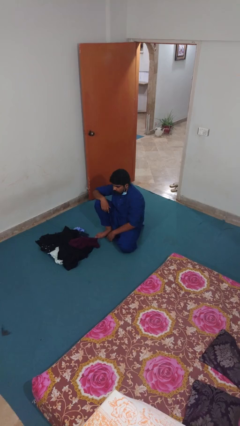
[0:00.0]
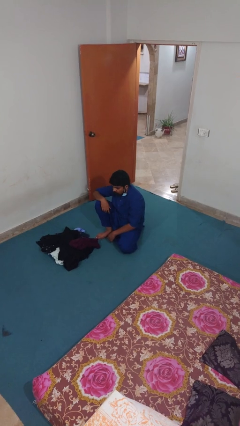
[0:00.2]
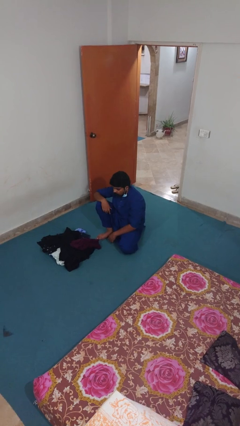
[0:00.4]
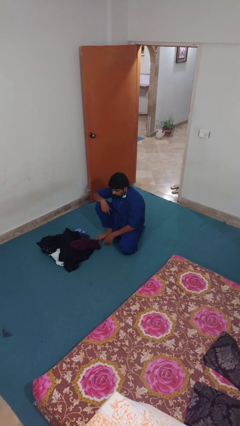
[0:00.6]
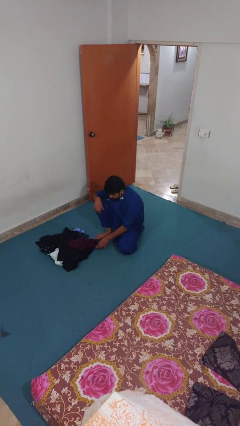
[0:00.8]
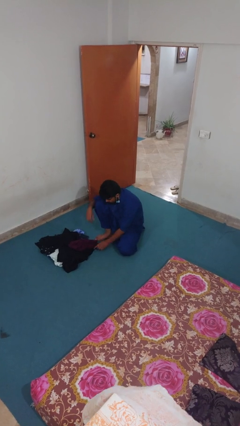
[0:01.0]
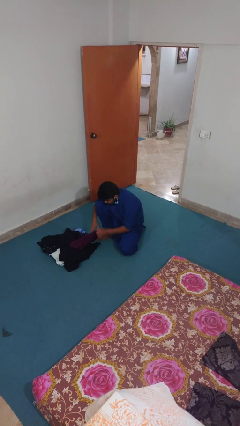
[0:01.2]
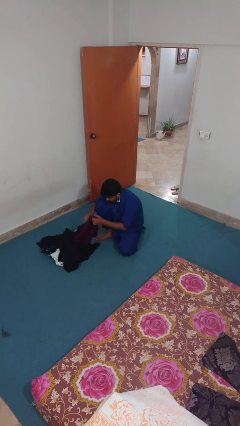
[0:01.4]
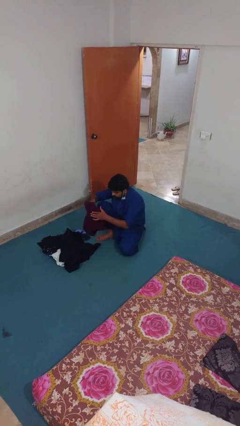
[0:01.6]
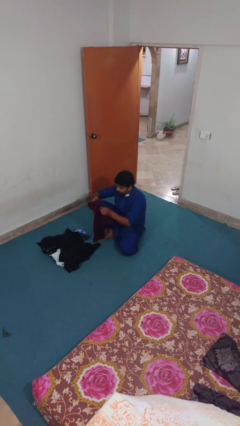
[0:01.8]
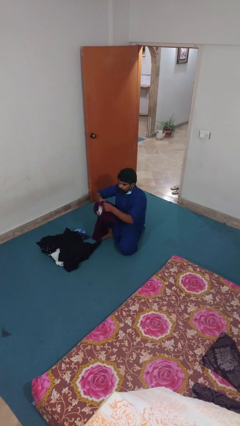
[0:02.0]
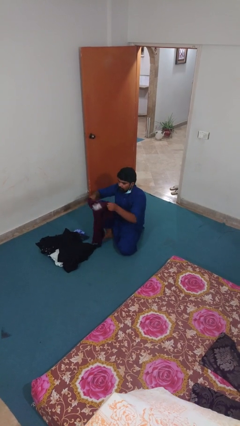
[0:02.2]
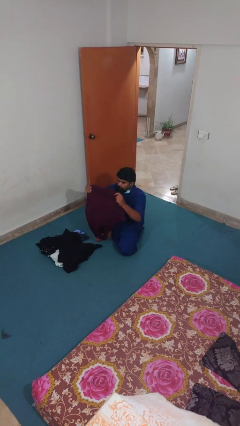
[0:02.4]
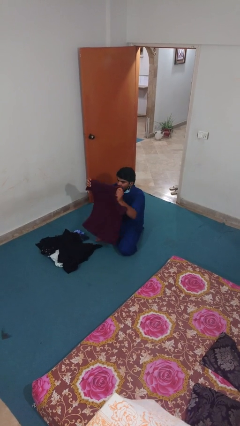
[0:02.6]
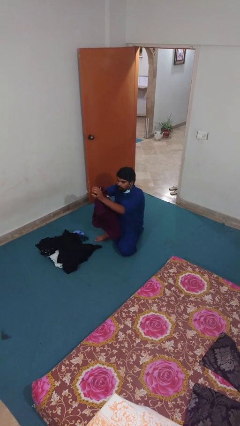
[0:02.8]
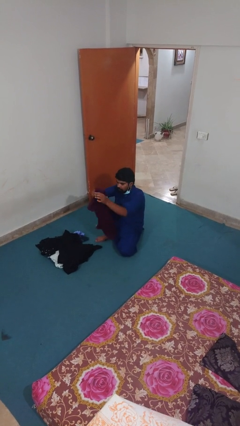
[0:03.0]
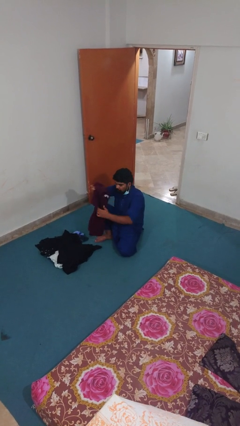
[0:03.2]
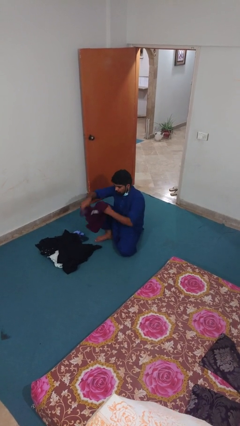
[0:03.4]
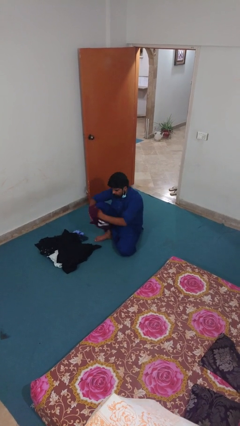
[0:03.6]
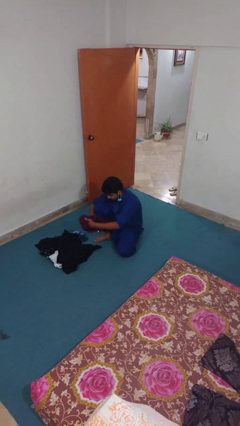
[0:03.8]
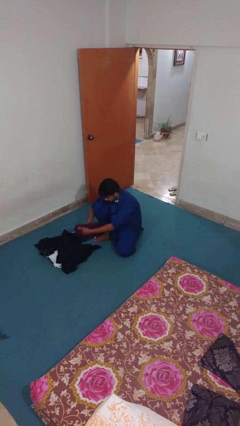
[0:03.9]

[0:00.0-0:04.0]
person folds shirt

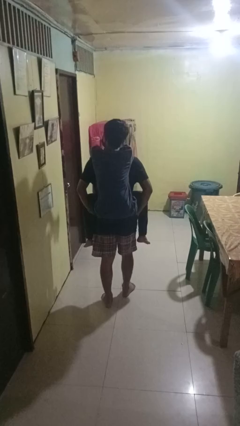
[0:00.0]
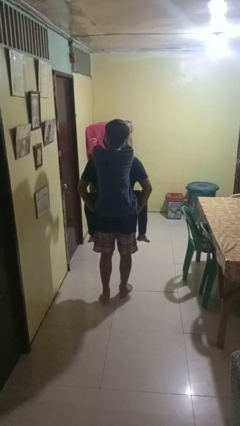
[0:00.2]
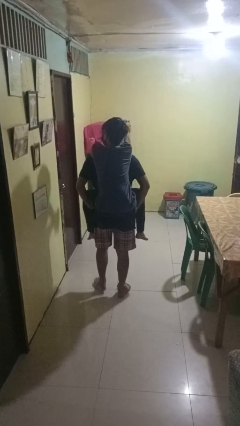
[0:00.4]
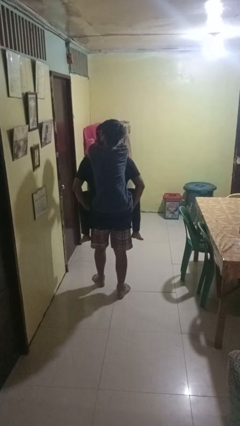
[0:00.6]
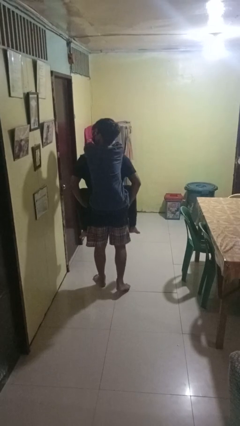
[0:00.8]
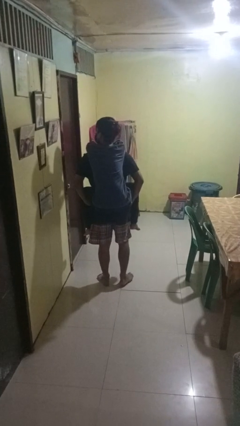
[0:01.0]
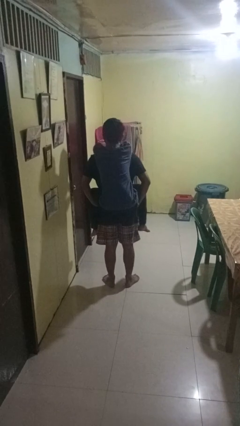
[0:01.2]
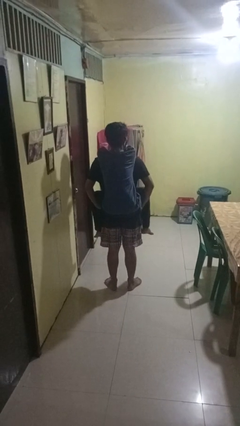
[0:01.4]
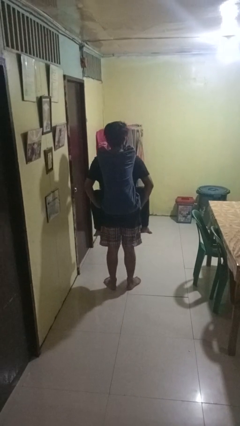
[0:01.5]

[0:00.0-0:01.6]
person carries person on back

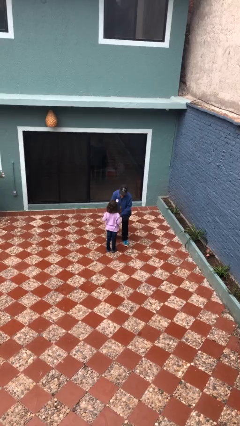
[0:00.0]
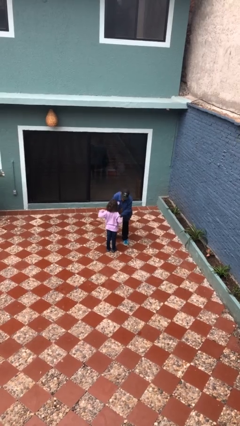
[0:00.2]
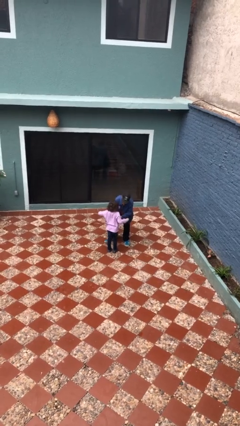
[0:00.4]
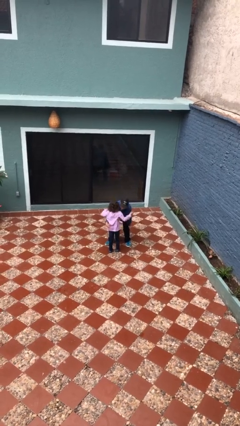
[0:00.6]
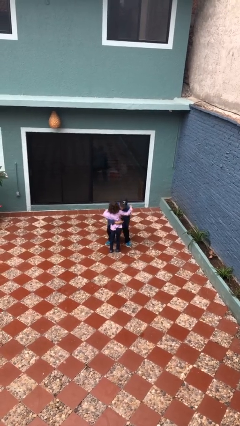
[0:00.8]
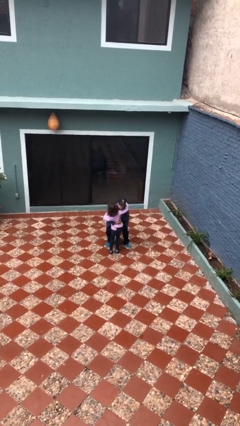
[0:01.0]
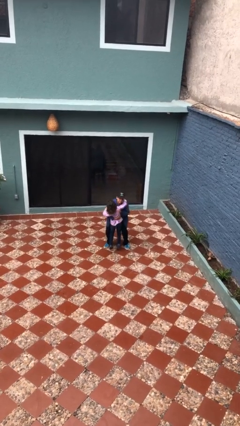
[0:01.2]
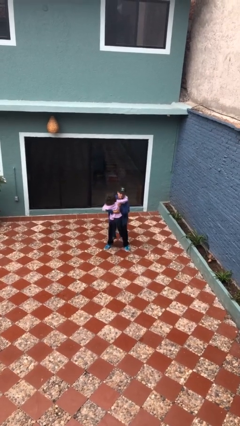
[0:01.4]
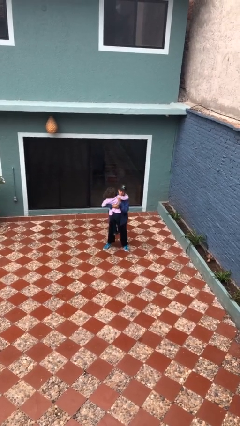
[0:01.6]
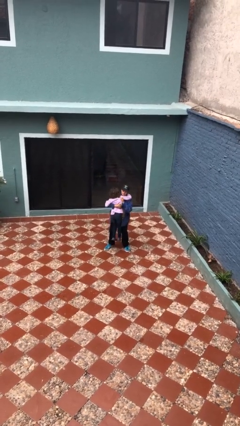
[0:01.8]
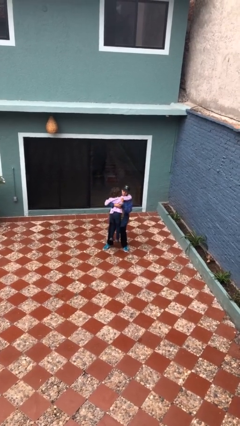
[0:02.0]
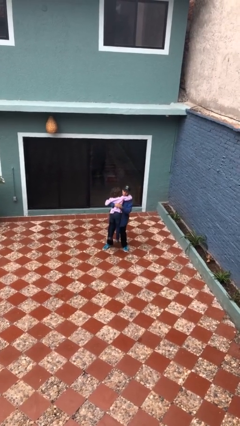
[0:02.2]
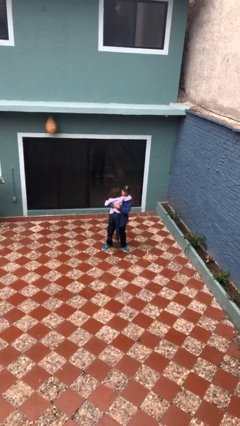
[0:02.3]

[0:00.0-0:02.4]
person picks up person

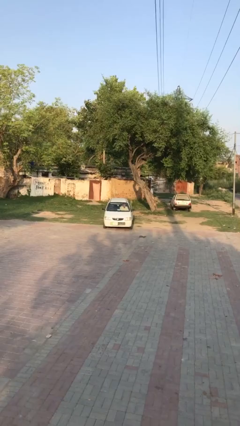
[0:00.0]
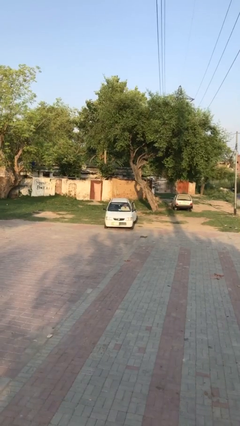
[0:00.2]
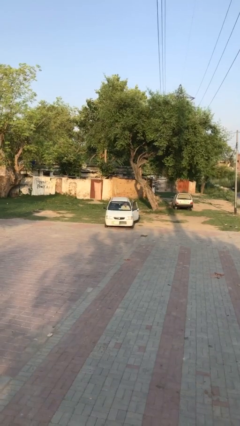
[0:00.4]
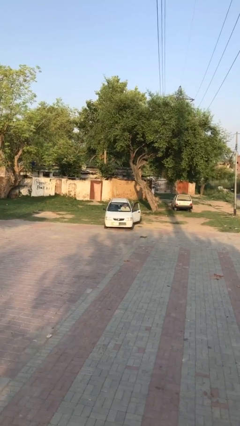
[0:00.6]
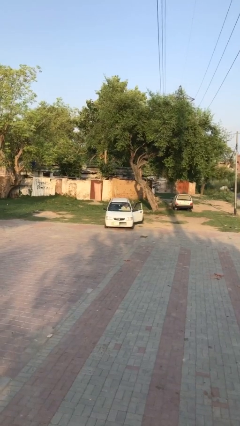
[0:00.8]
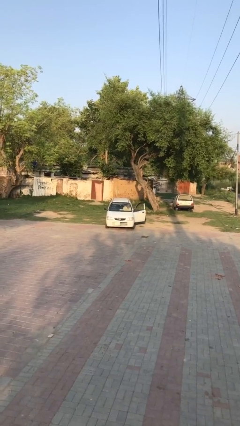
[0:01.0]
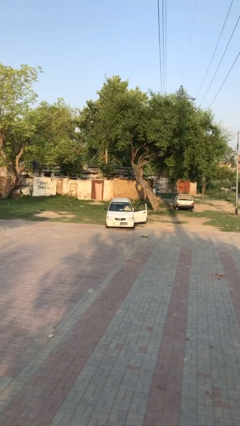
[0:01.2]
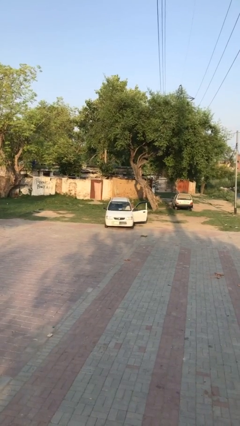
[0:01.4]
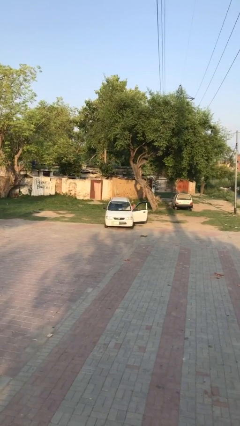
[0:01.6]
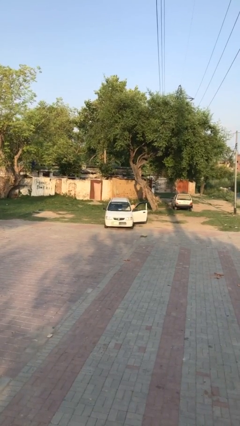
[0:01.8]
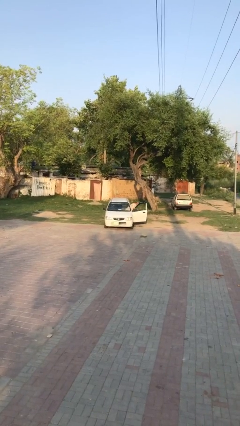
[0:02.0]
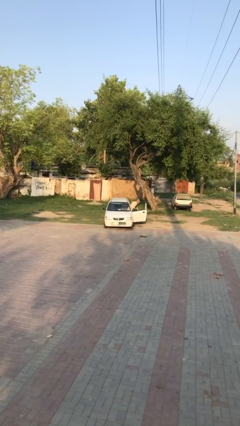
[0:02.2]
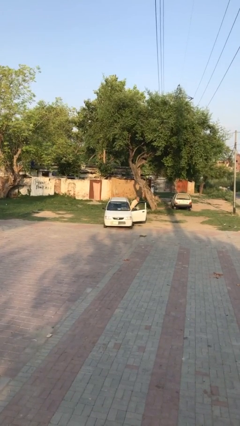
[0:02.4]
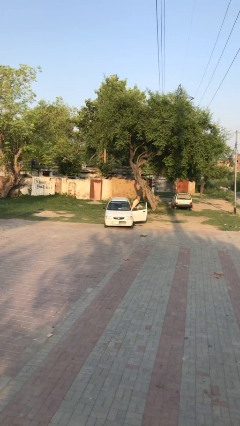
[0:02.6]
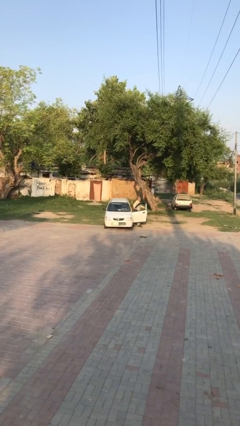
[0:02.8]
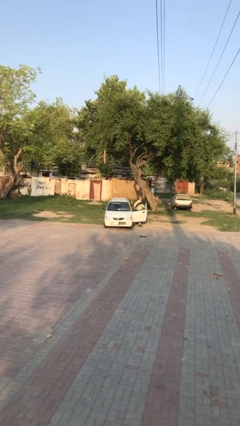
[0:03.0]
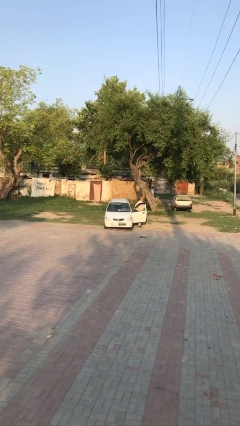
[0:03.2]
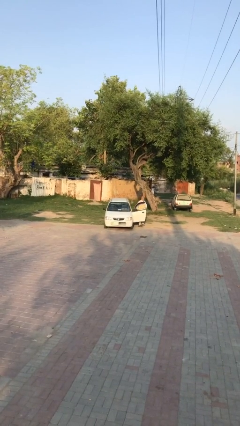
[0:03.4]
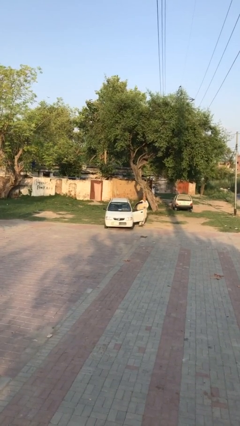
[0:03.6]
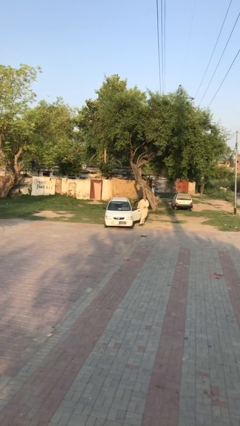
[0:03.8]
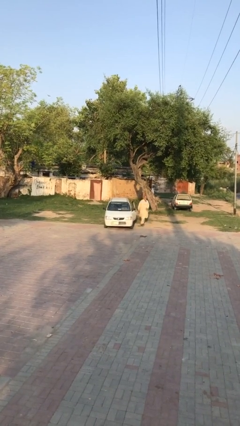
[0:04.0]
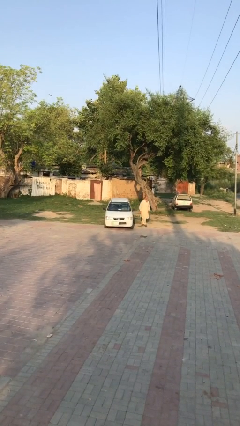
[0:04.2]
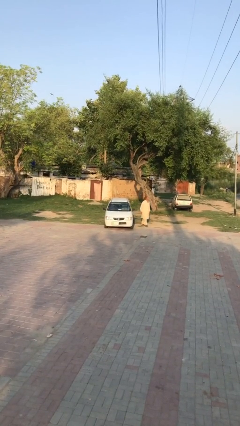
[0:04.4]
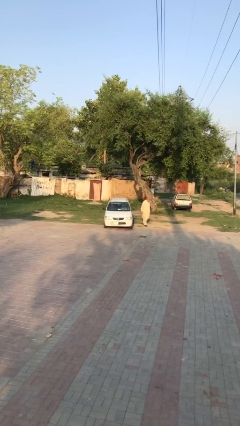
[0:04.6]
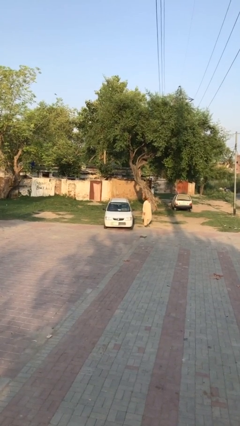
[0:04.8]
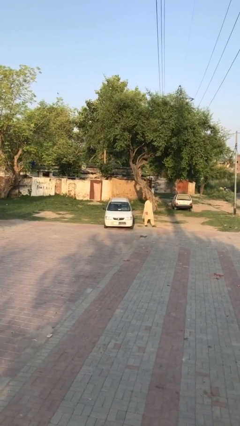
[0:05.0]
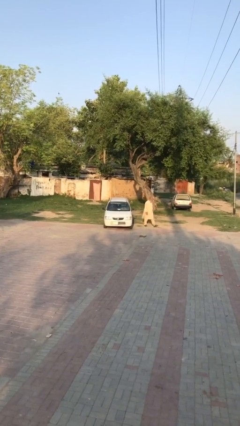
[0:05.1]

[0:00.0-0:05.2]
car drops off person

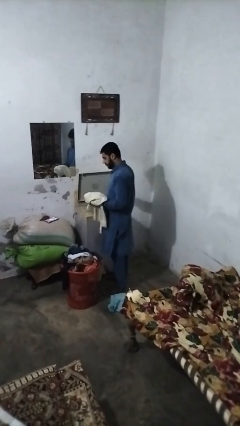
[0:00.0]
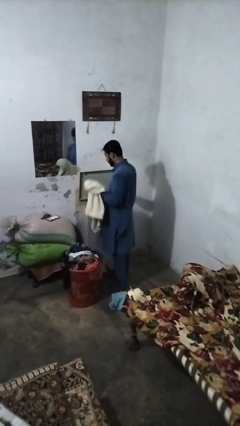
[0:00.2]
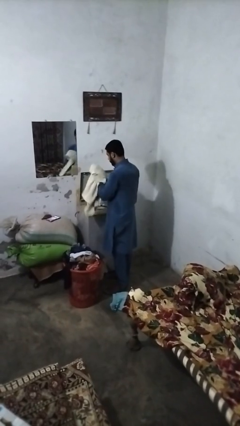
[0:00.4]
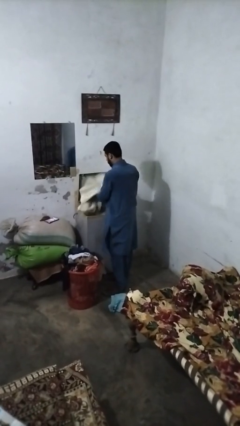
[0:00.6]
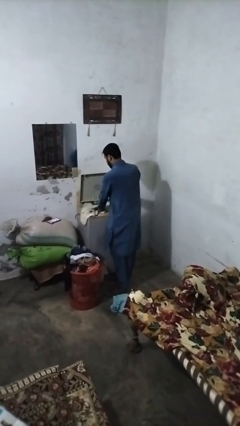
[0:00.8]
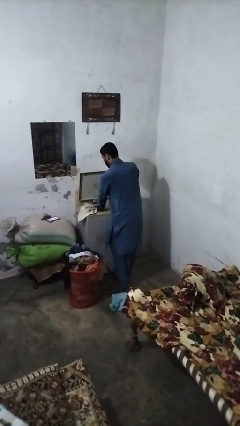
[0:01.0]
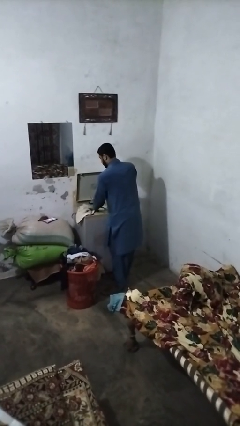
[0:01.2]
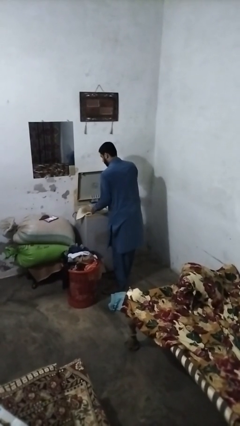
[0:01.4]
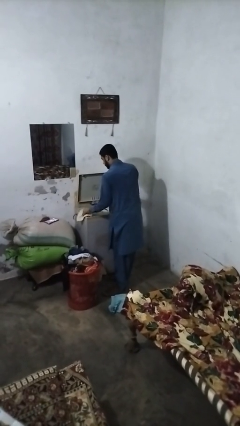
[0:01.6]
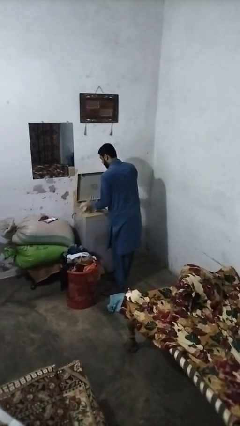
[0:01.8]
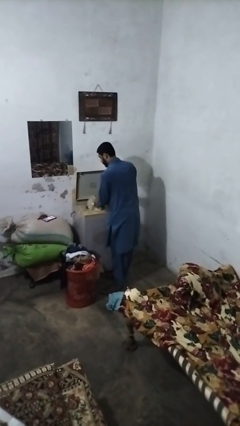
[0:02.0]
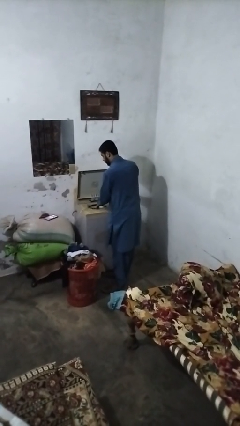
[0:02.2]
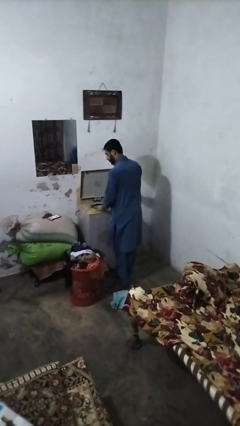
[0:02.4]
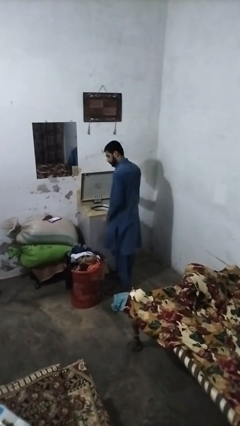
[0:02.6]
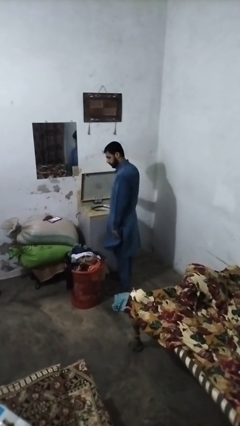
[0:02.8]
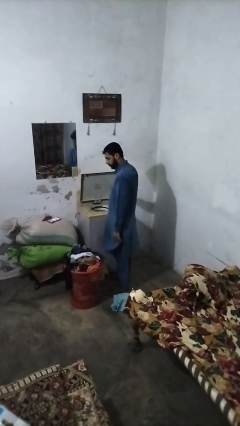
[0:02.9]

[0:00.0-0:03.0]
person loads clotheswasher

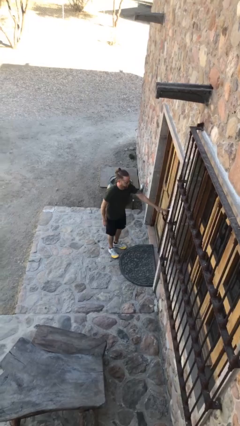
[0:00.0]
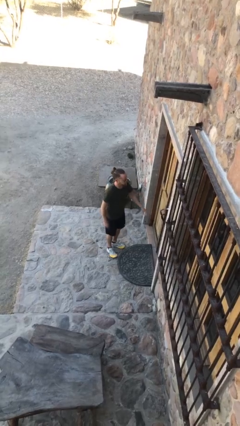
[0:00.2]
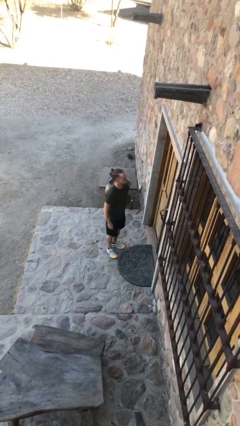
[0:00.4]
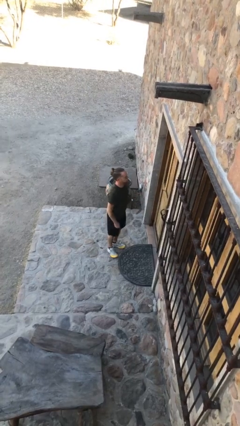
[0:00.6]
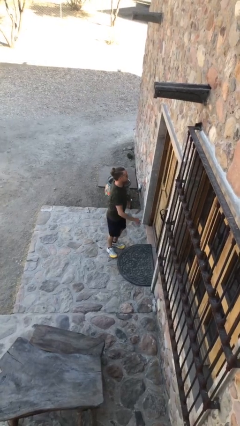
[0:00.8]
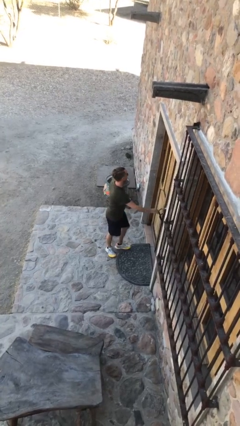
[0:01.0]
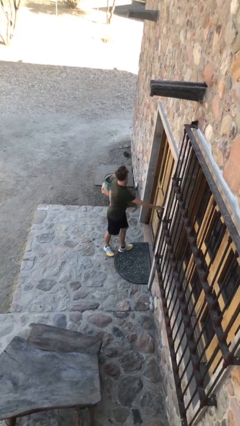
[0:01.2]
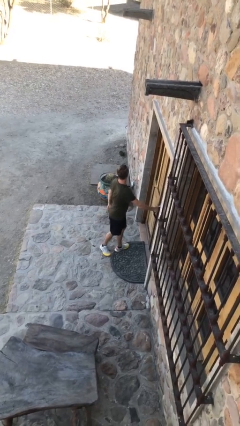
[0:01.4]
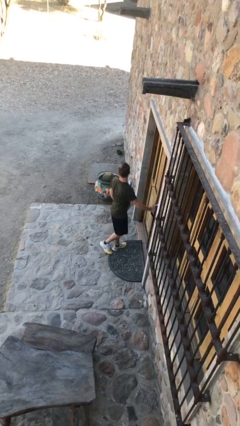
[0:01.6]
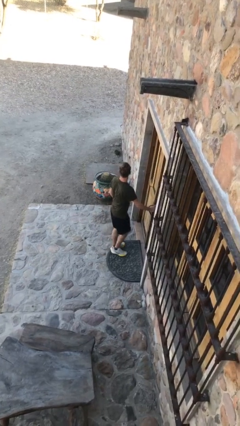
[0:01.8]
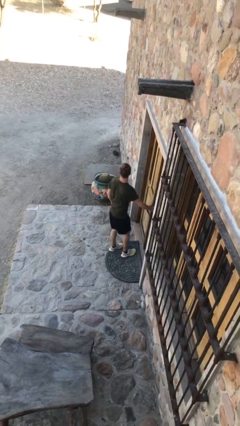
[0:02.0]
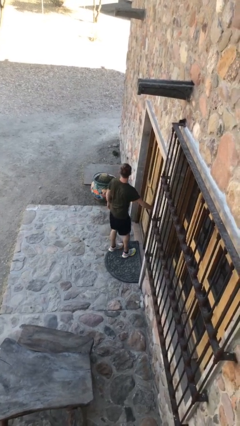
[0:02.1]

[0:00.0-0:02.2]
person opens facility door
